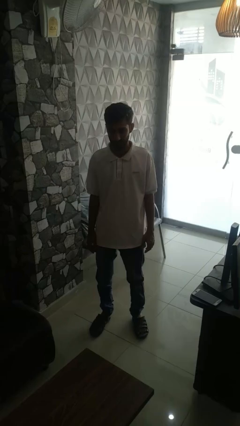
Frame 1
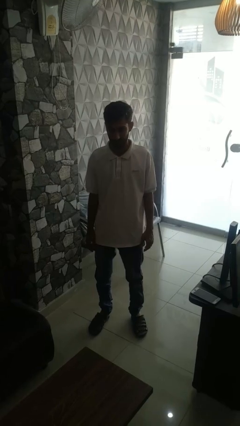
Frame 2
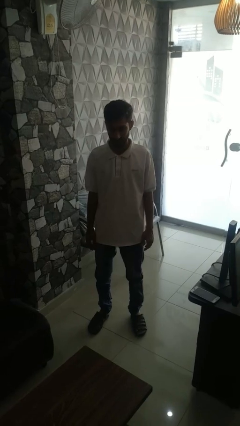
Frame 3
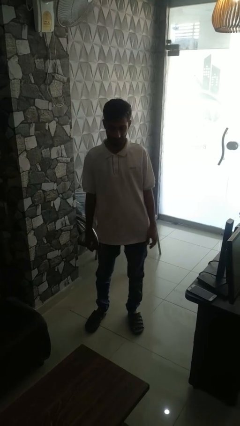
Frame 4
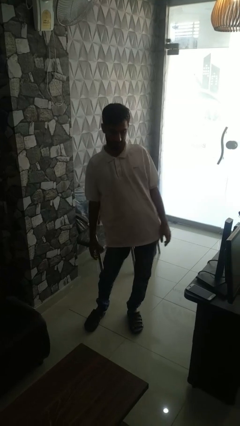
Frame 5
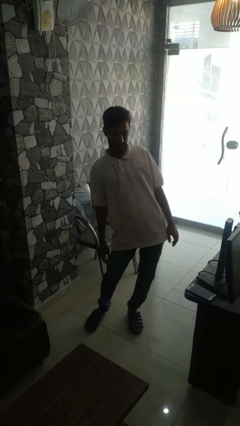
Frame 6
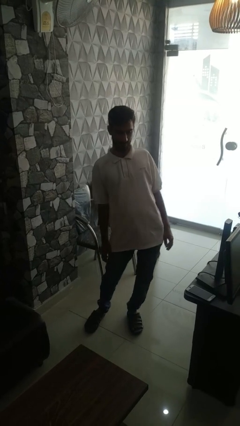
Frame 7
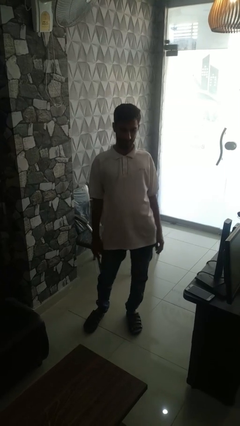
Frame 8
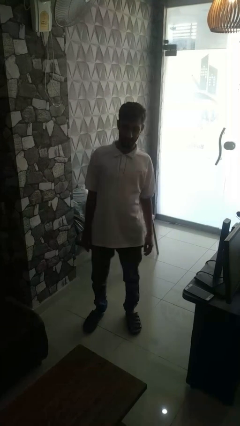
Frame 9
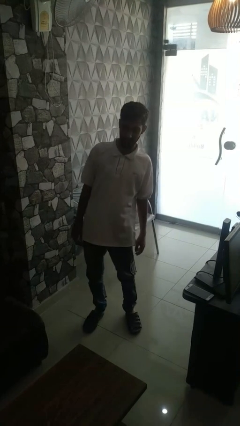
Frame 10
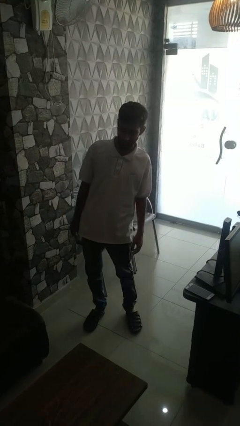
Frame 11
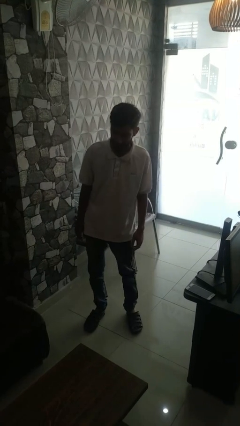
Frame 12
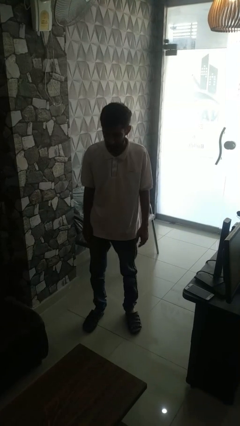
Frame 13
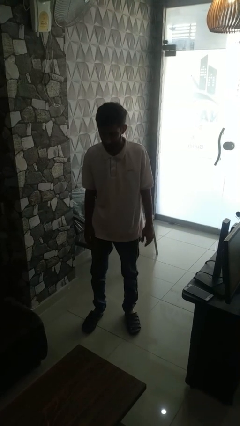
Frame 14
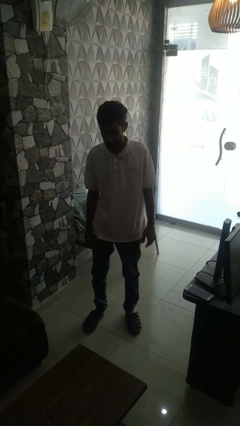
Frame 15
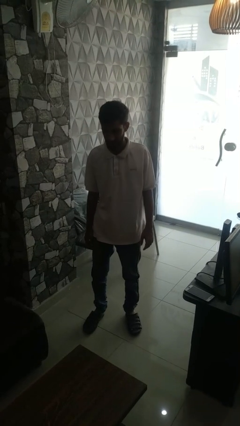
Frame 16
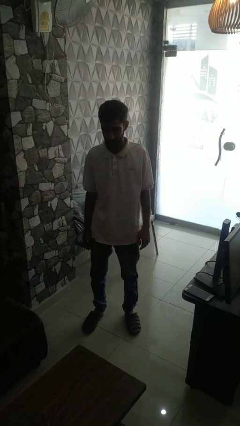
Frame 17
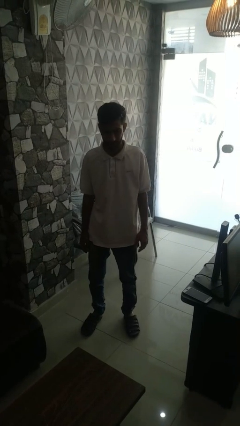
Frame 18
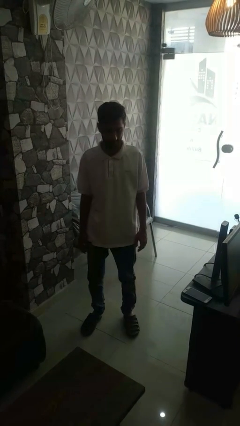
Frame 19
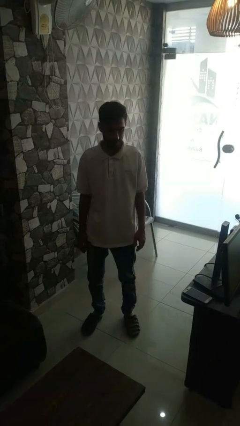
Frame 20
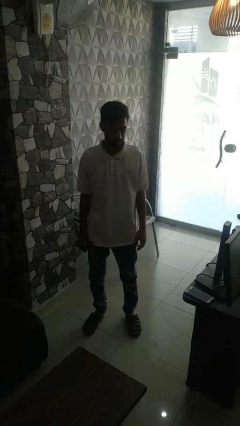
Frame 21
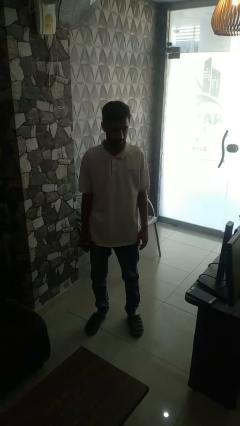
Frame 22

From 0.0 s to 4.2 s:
person wiggles hips

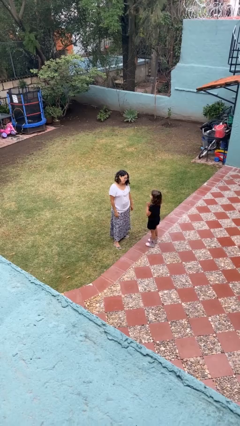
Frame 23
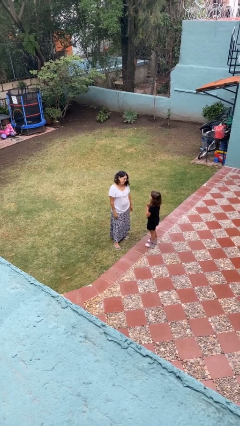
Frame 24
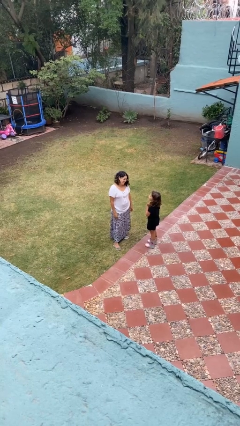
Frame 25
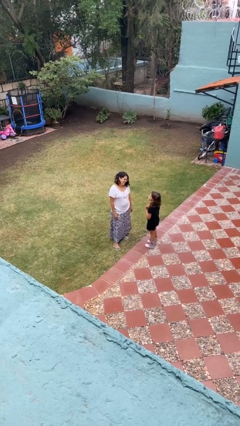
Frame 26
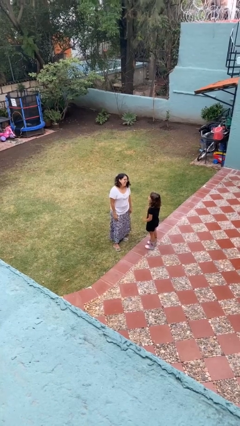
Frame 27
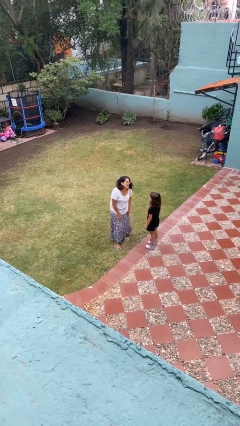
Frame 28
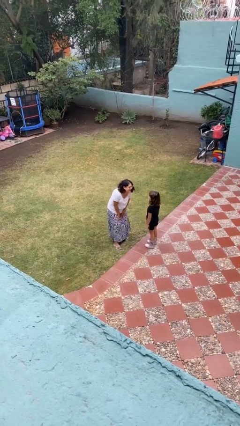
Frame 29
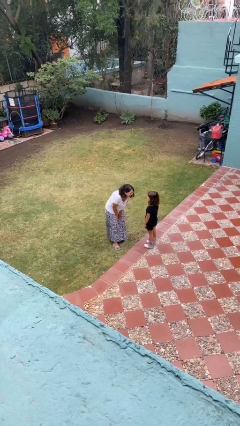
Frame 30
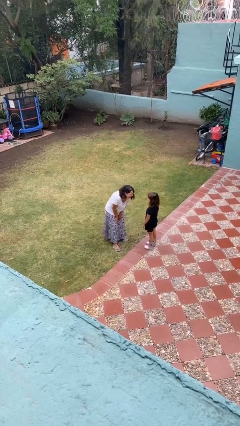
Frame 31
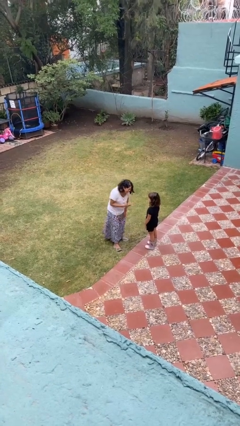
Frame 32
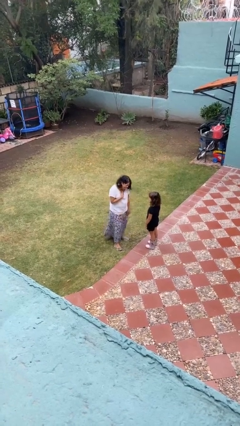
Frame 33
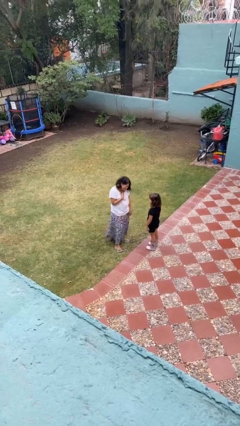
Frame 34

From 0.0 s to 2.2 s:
person laughs with person

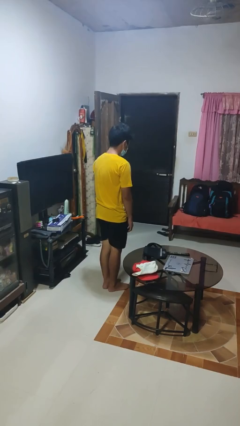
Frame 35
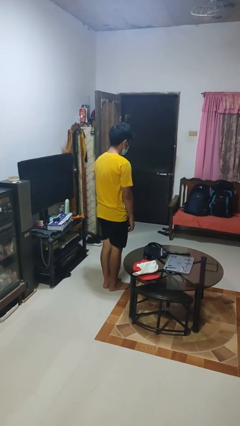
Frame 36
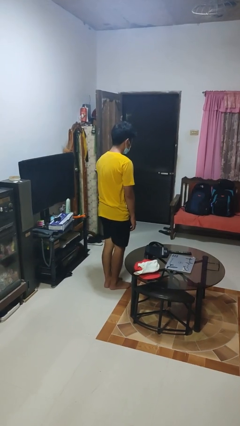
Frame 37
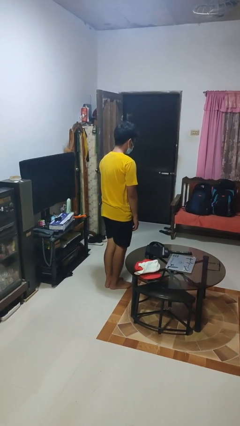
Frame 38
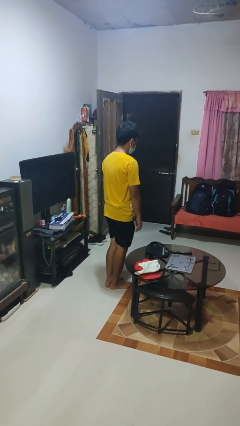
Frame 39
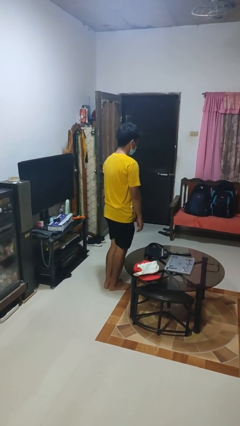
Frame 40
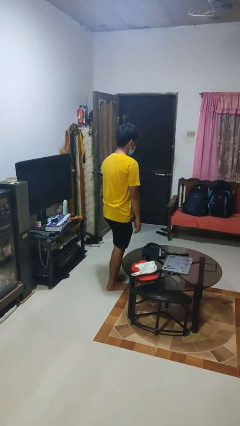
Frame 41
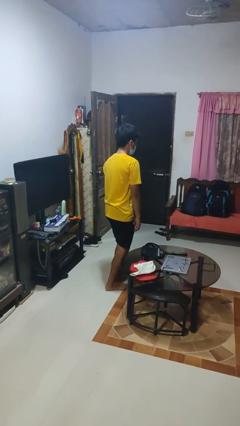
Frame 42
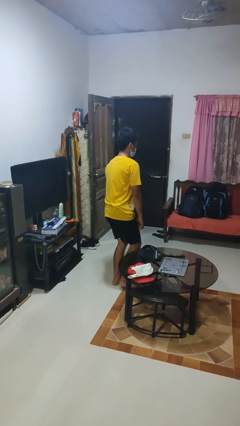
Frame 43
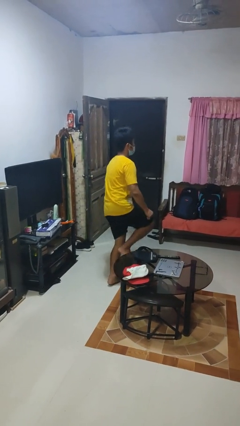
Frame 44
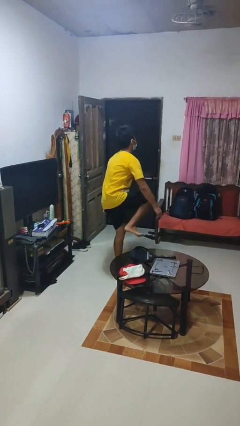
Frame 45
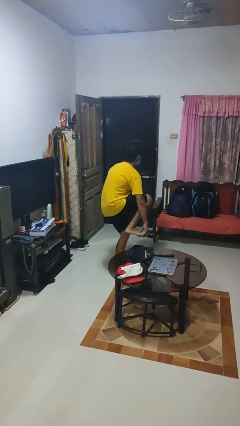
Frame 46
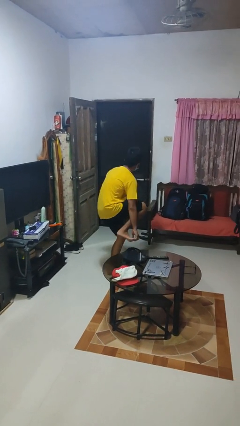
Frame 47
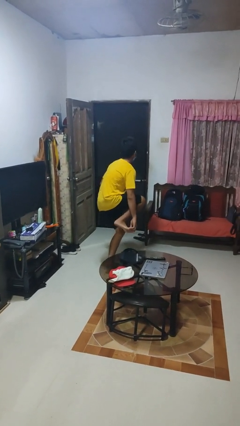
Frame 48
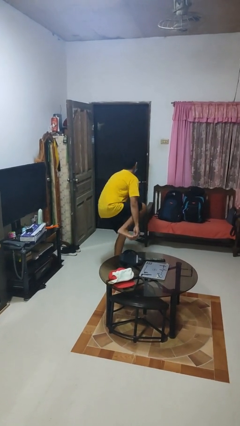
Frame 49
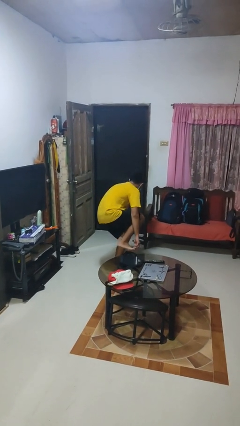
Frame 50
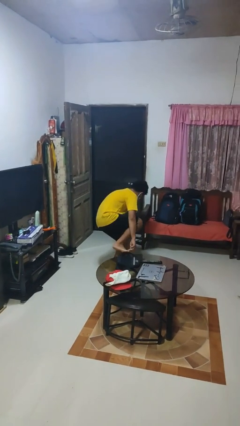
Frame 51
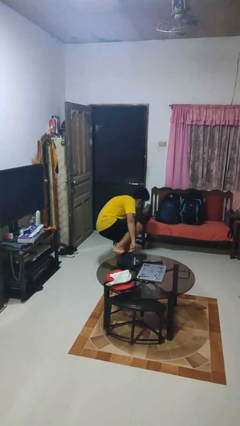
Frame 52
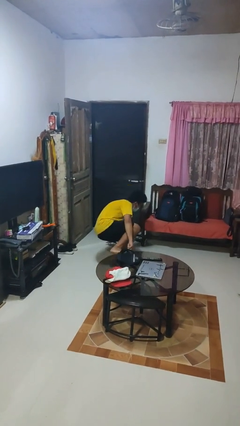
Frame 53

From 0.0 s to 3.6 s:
person trips on object on floor

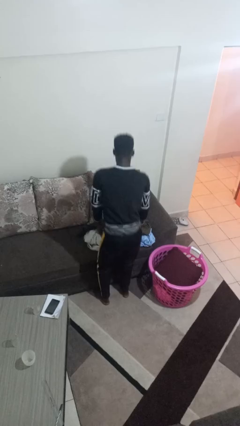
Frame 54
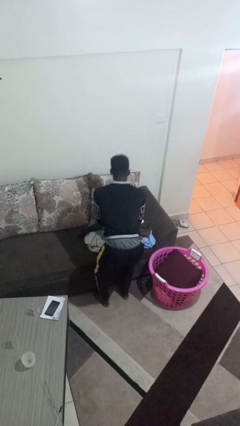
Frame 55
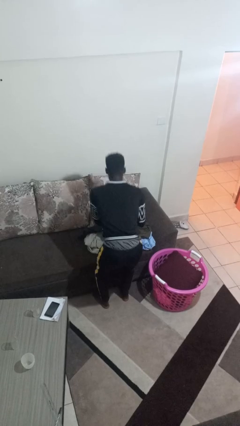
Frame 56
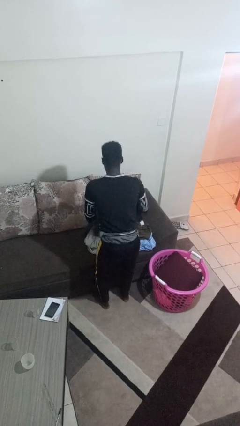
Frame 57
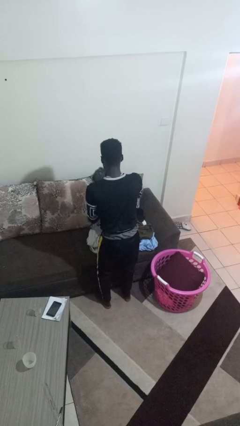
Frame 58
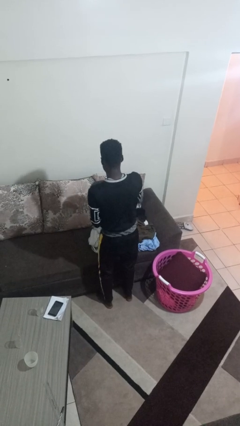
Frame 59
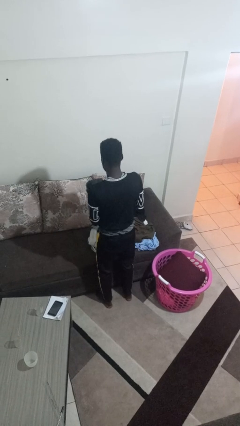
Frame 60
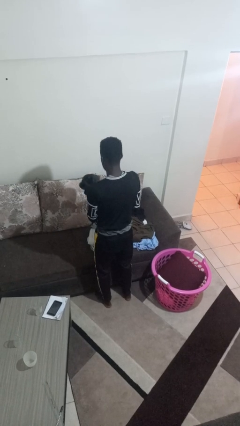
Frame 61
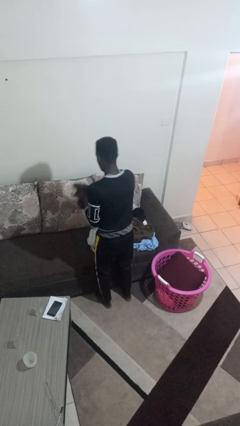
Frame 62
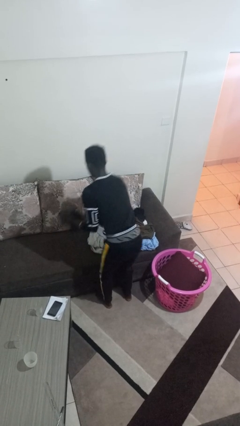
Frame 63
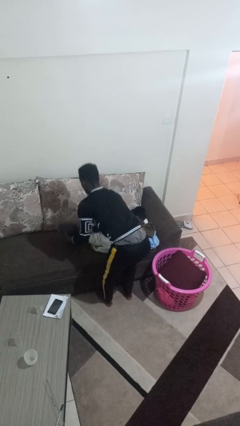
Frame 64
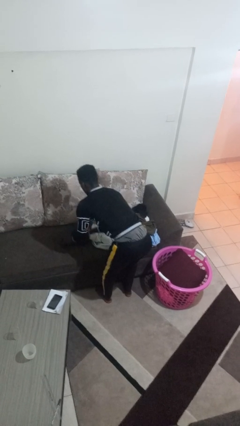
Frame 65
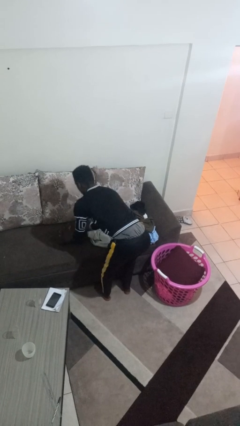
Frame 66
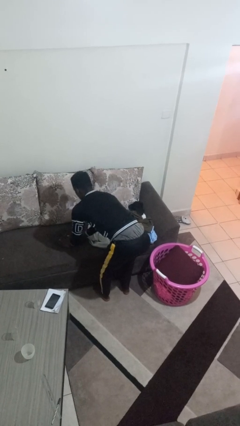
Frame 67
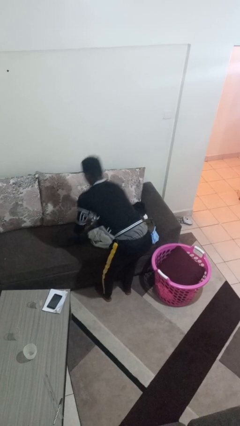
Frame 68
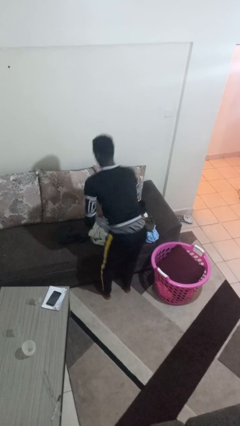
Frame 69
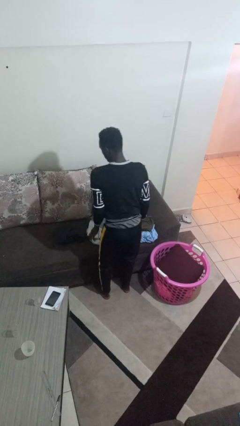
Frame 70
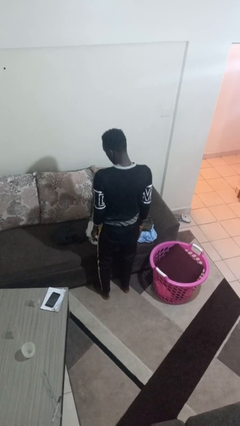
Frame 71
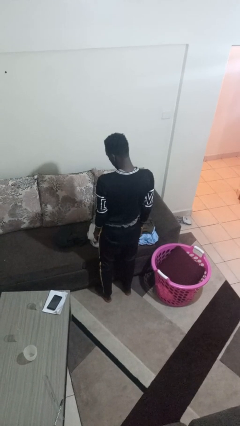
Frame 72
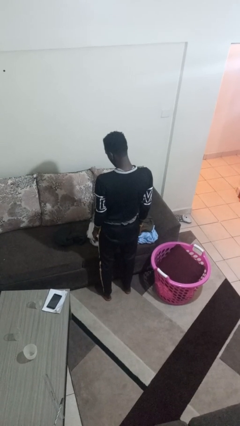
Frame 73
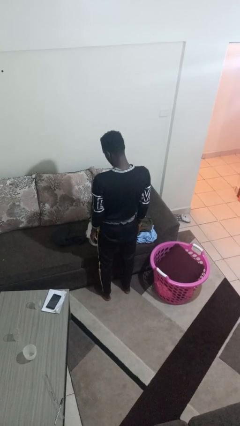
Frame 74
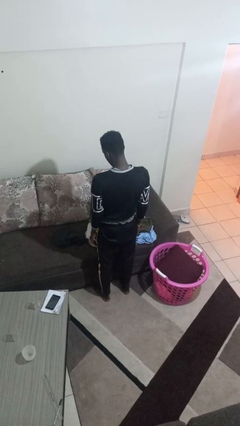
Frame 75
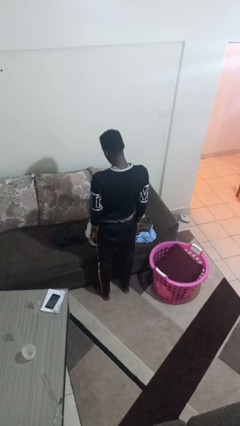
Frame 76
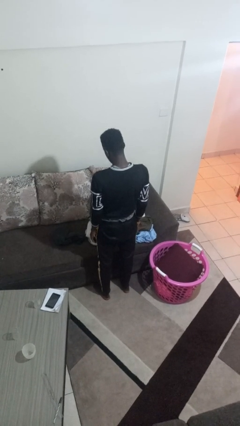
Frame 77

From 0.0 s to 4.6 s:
person folds pants

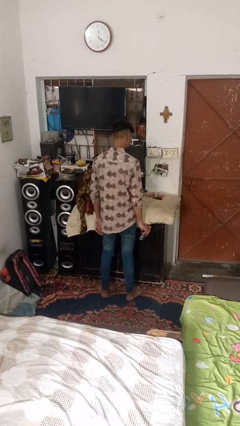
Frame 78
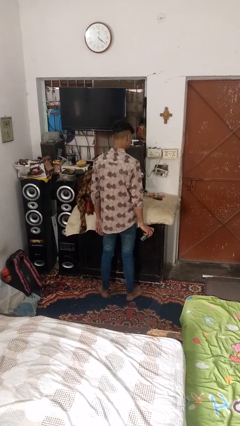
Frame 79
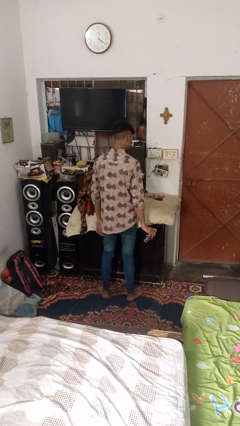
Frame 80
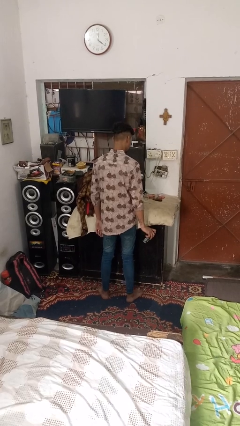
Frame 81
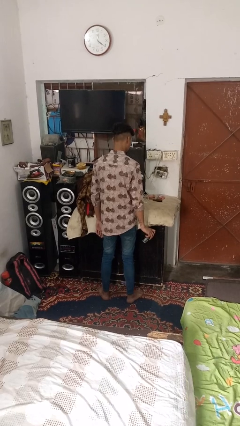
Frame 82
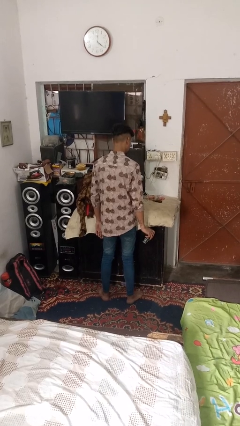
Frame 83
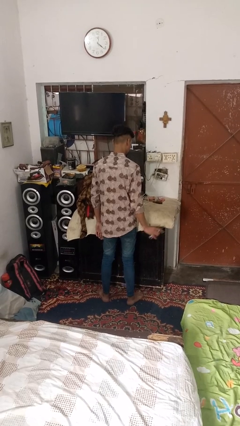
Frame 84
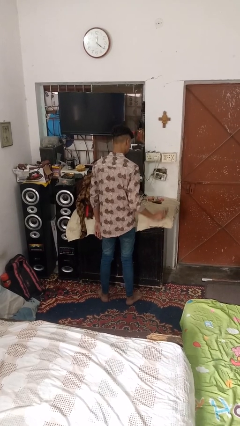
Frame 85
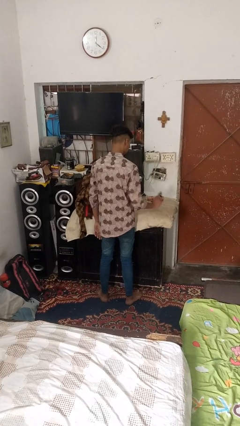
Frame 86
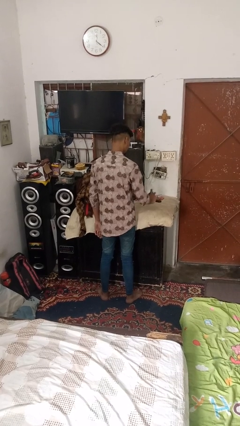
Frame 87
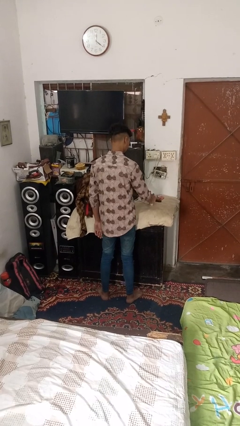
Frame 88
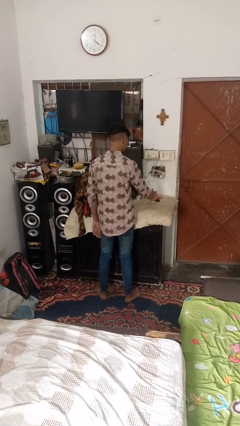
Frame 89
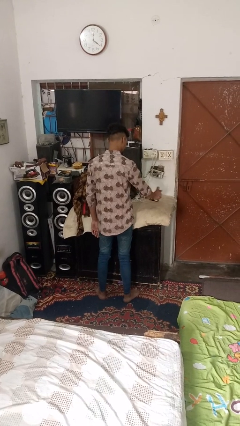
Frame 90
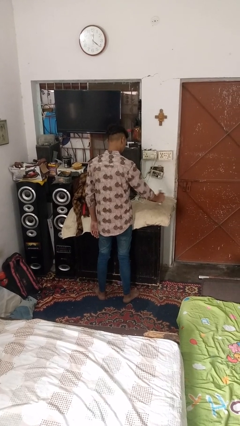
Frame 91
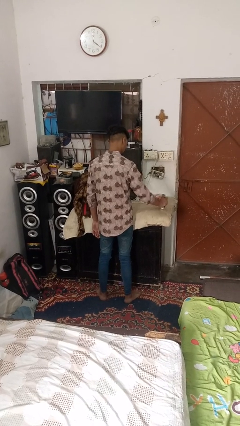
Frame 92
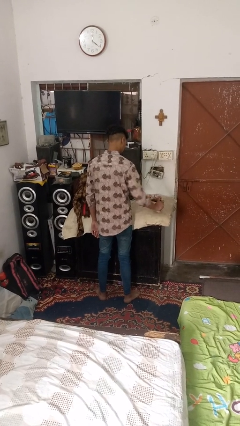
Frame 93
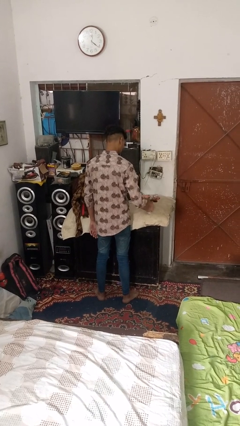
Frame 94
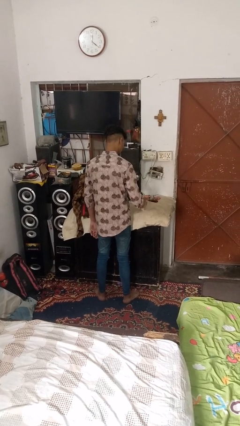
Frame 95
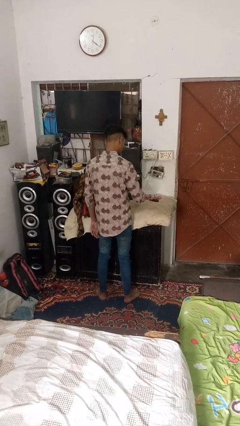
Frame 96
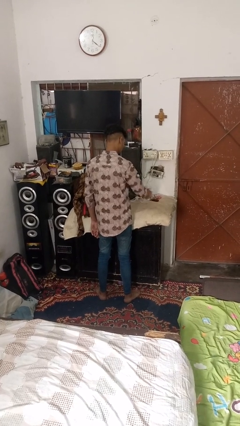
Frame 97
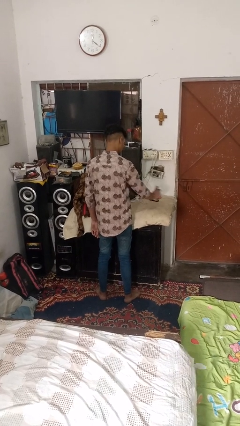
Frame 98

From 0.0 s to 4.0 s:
person sprays from bottle
